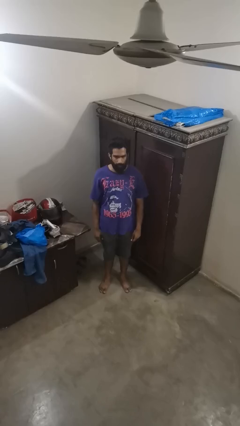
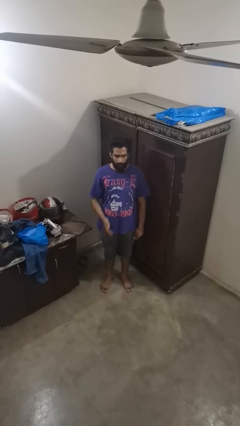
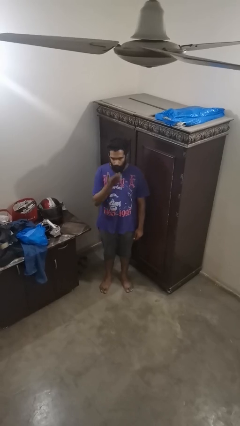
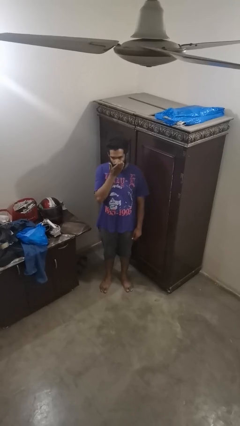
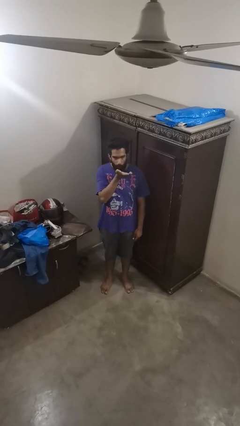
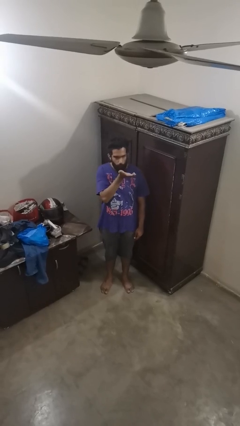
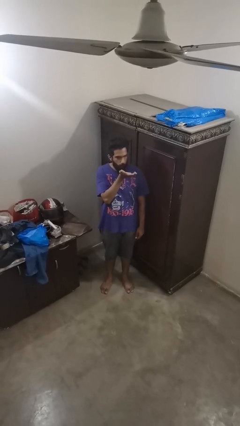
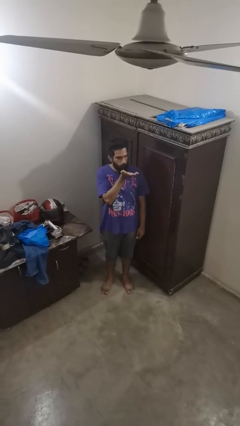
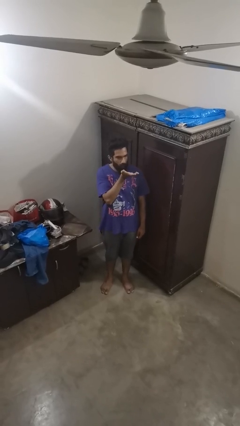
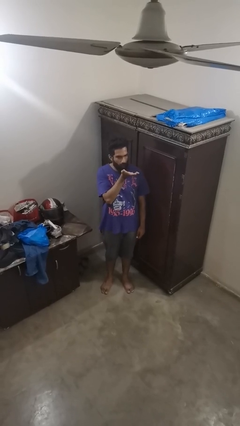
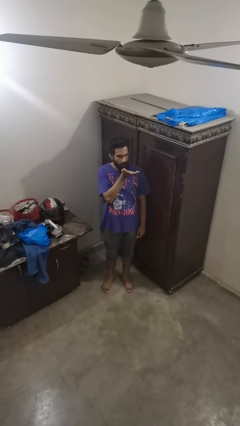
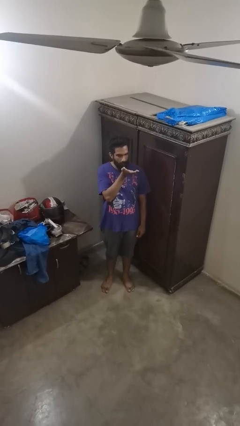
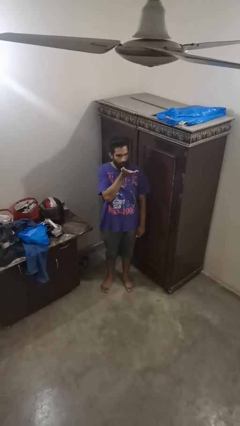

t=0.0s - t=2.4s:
person gestures blow kiss

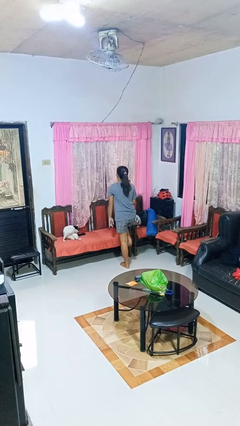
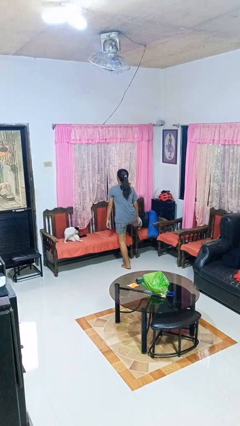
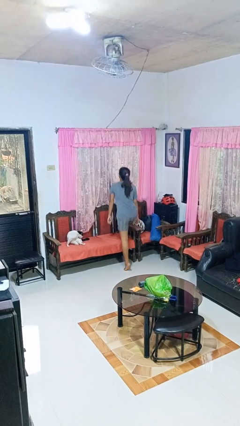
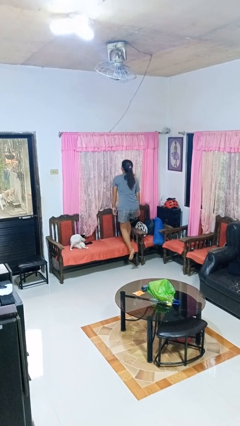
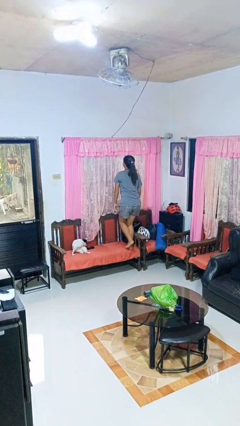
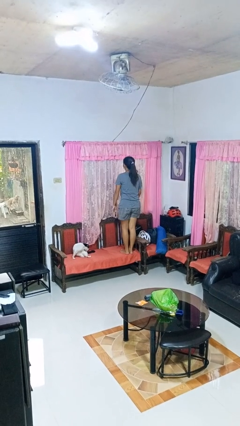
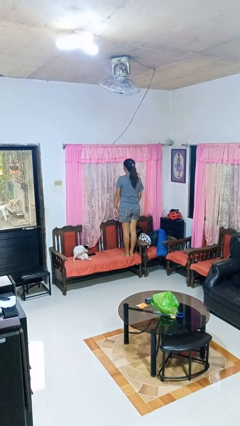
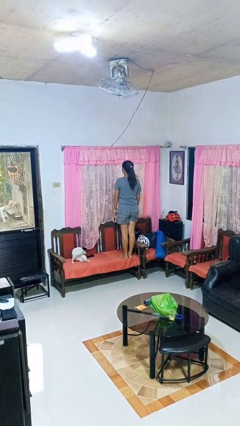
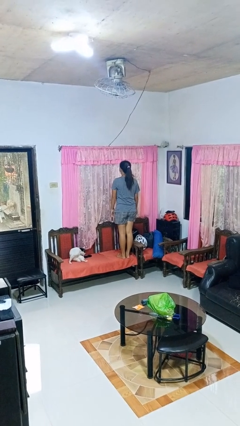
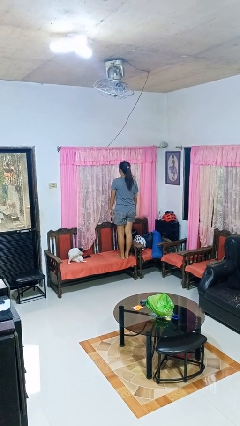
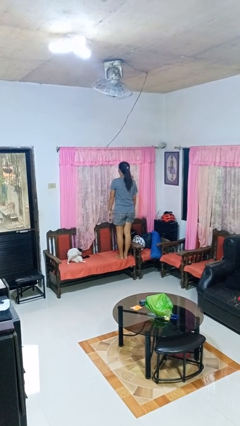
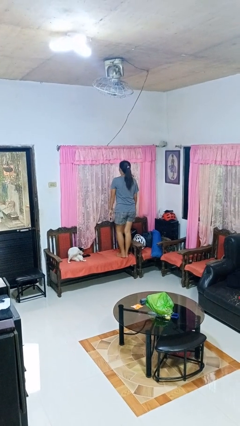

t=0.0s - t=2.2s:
person climbs on chair

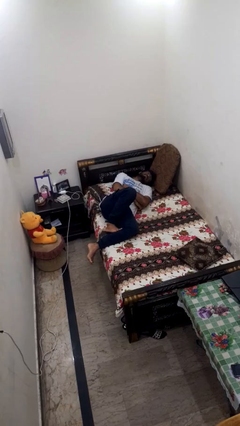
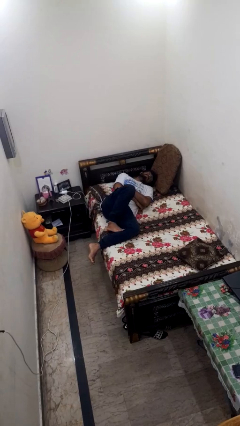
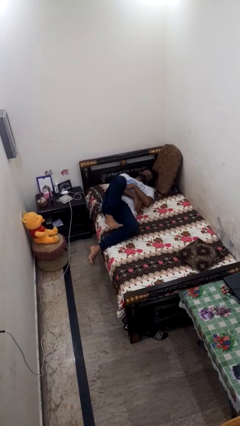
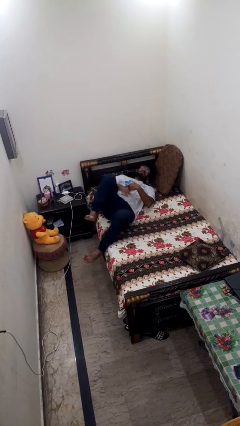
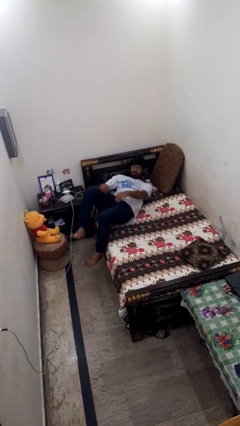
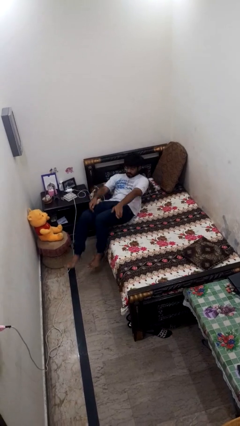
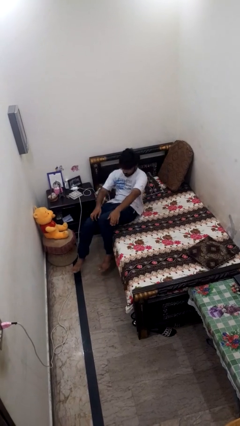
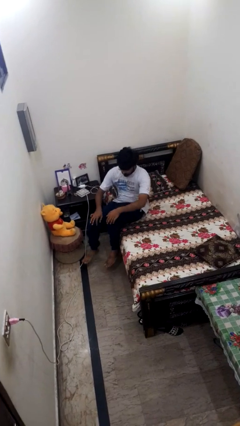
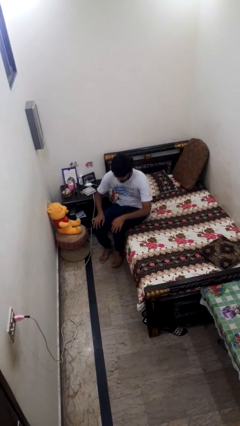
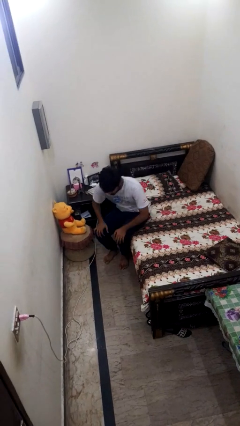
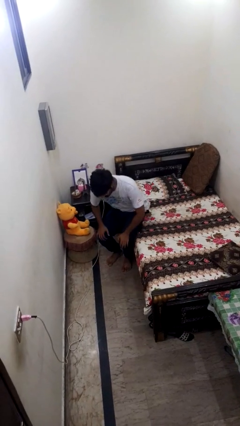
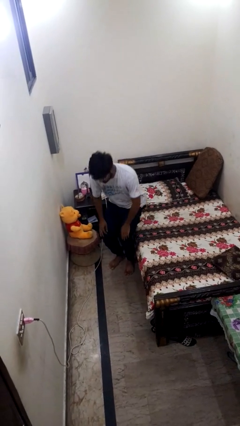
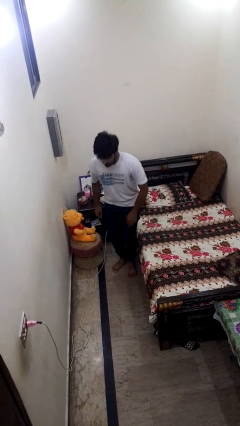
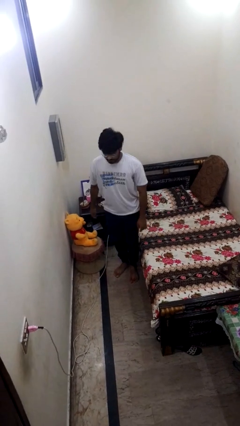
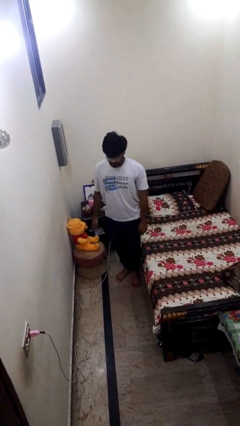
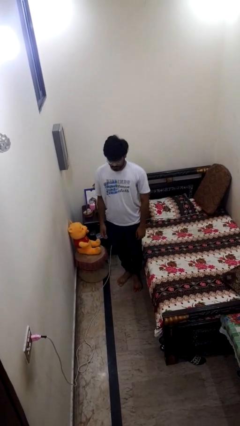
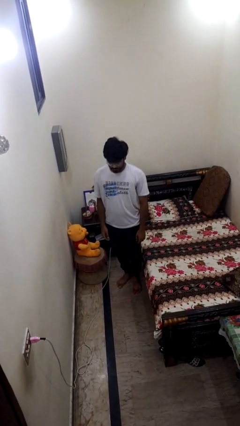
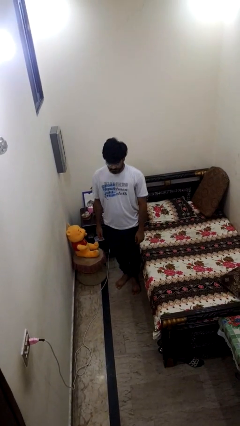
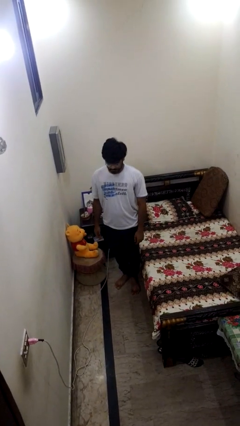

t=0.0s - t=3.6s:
person stands up

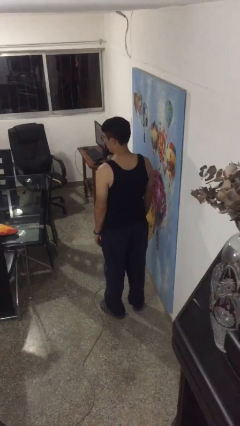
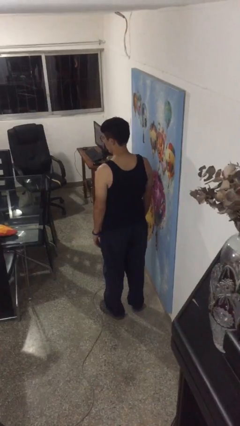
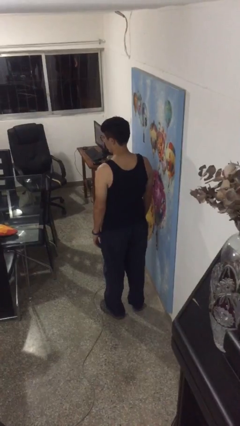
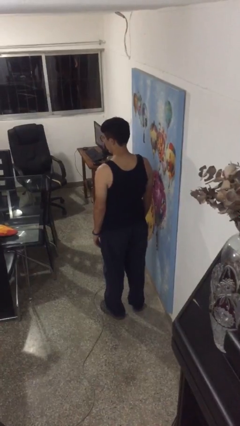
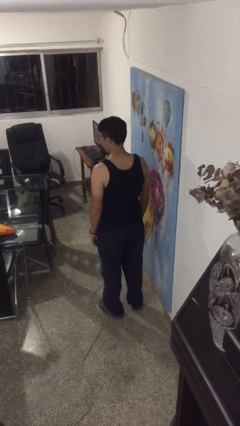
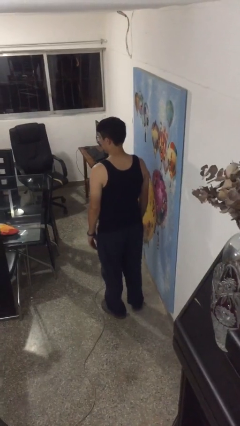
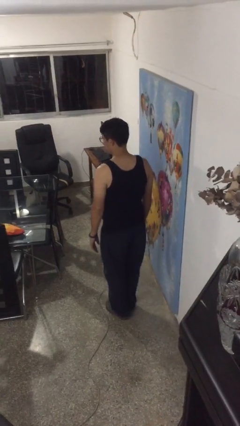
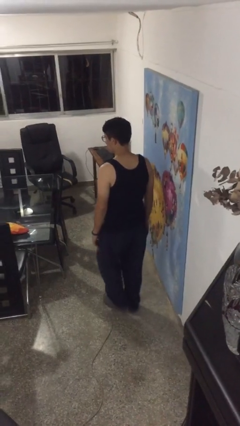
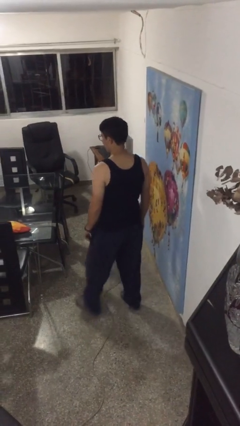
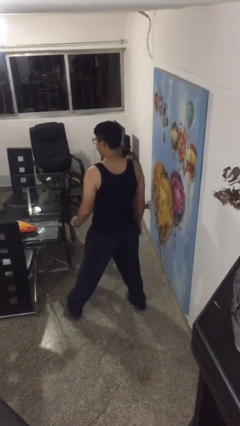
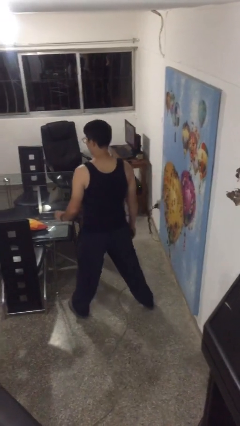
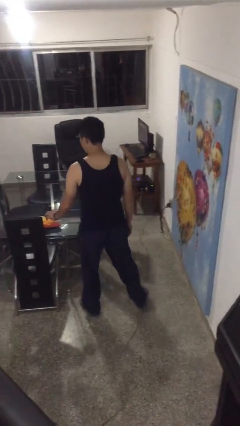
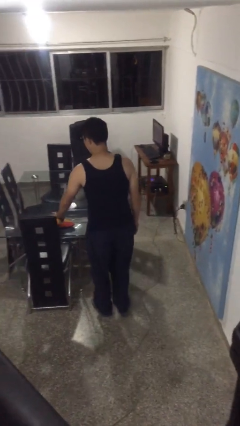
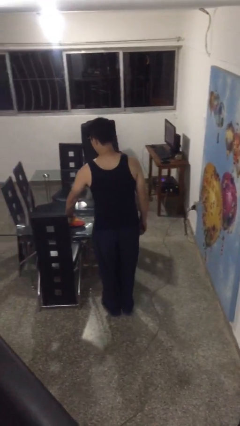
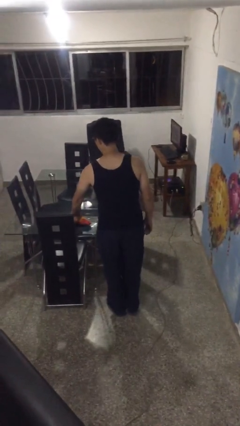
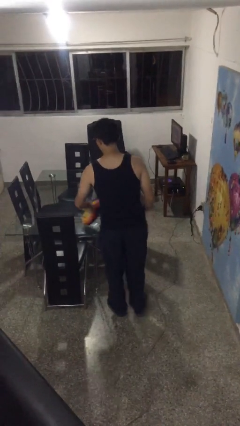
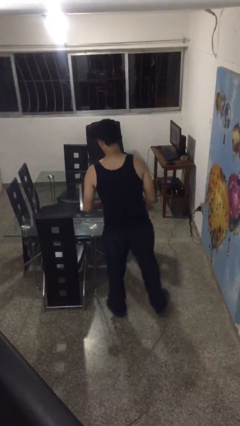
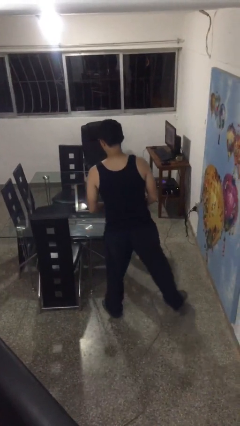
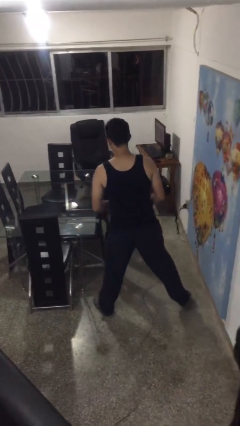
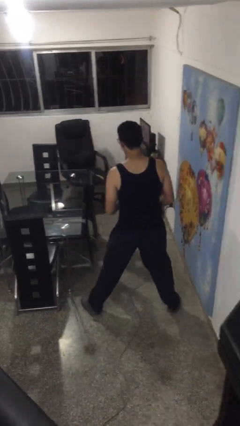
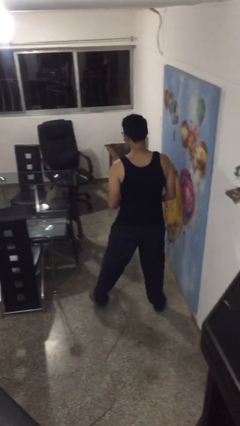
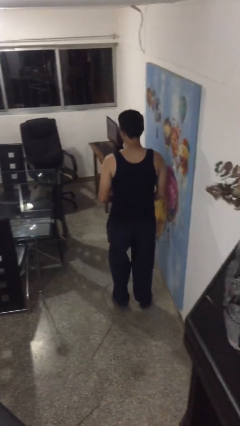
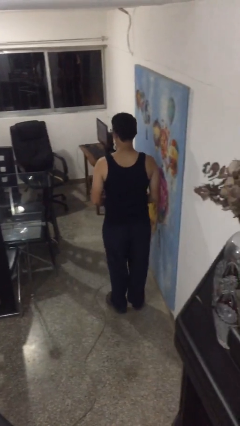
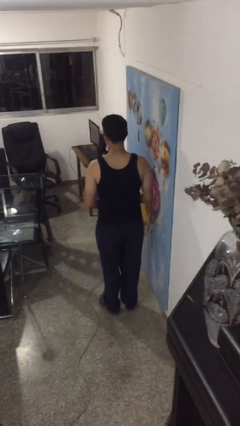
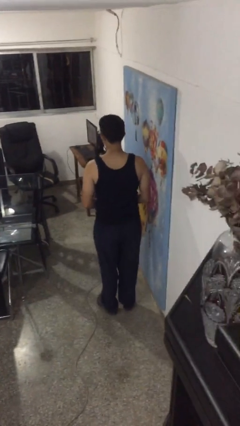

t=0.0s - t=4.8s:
person picks up object from table

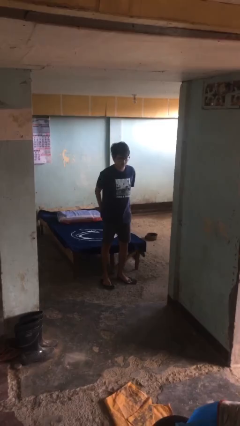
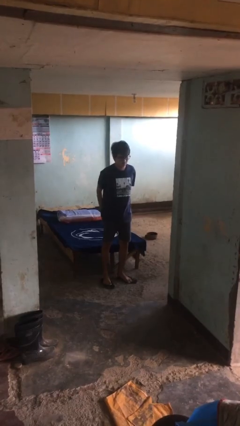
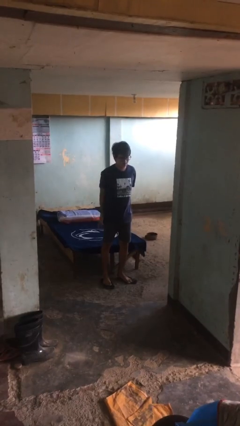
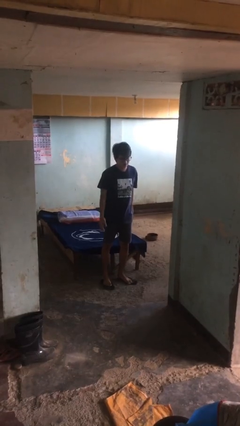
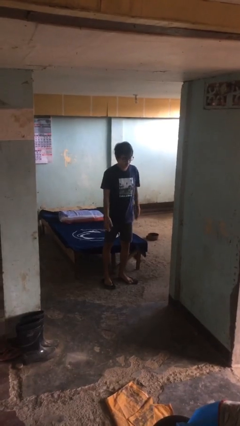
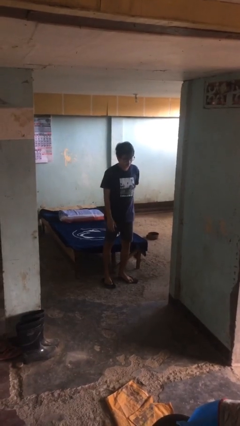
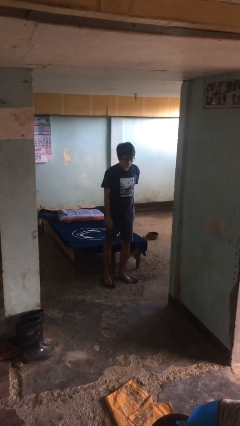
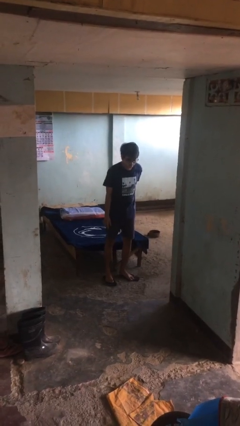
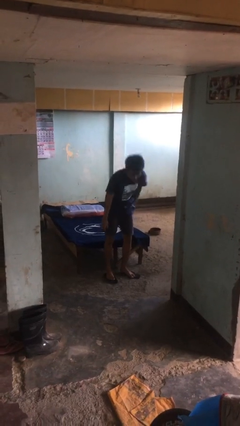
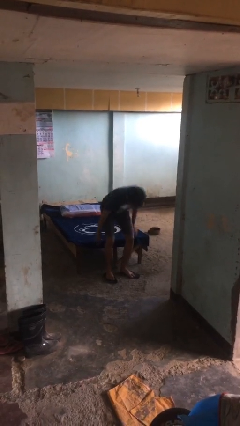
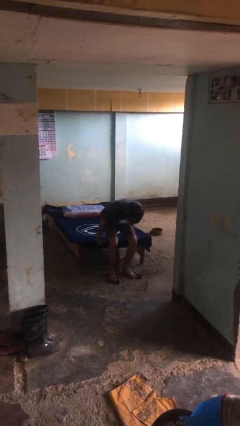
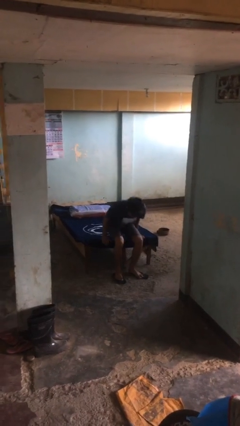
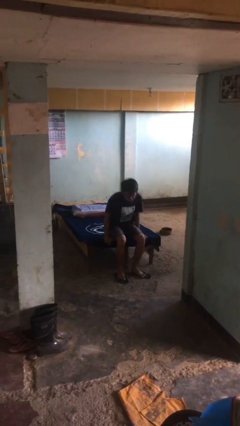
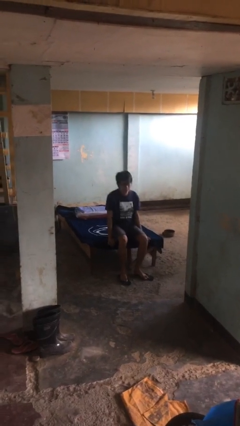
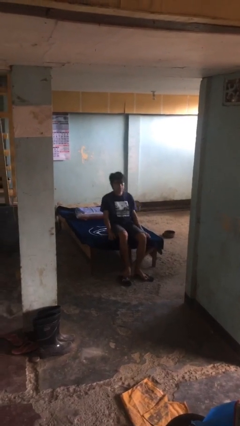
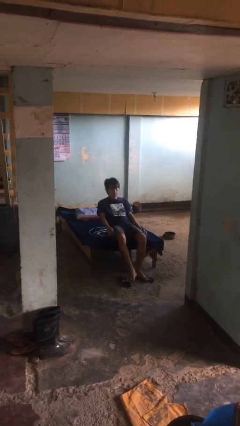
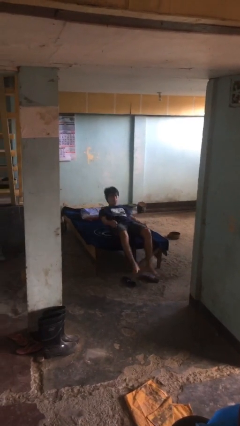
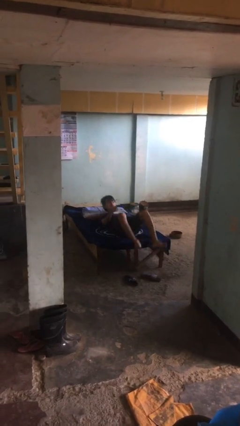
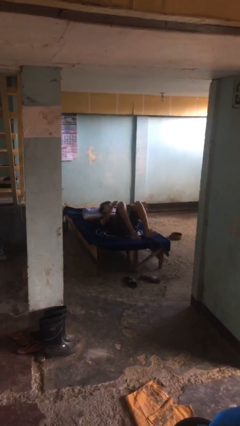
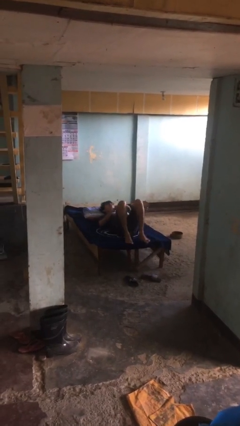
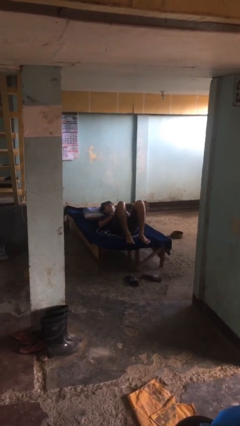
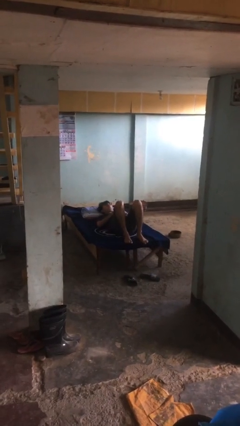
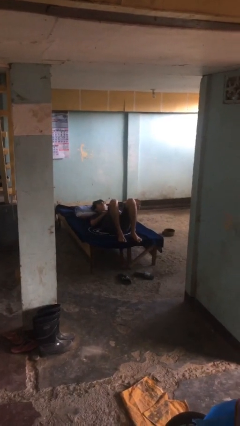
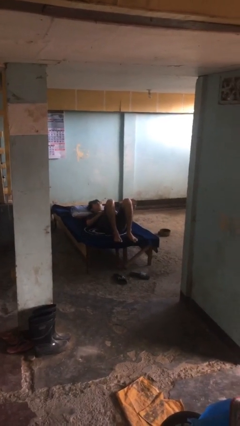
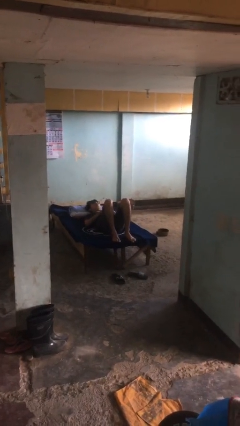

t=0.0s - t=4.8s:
person lies down on bed
